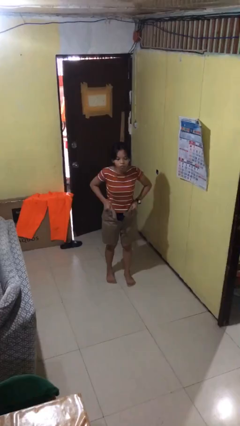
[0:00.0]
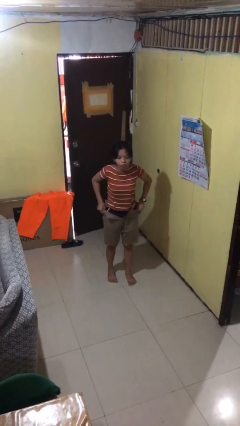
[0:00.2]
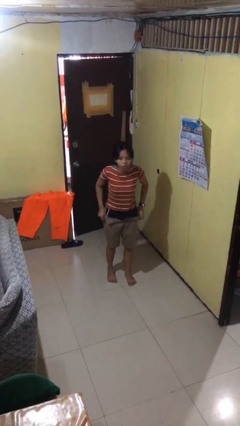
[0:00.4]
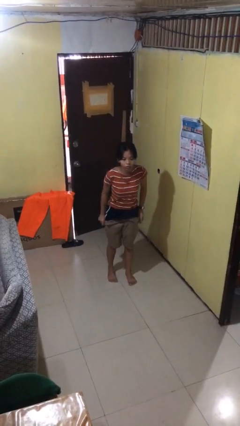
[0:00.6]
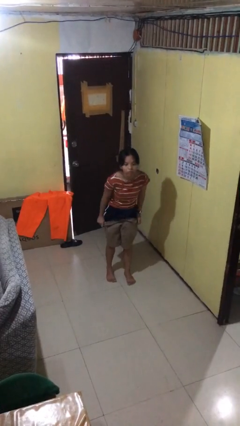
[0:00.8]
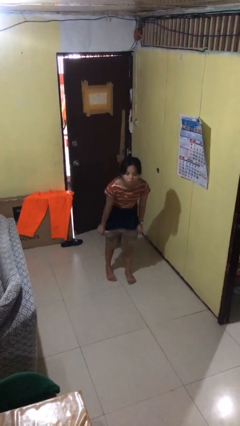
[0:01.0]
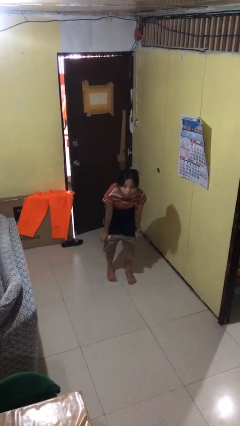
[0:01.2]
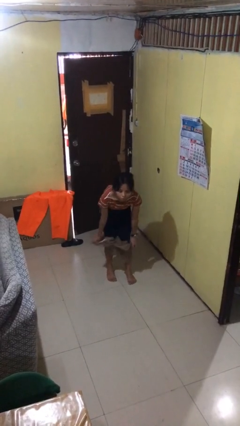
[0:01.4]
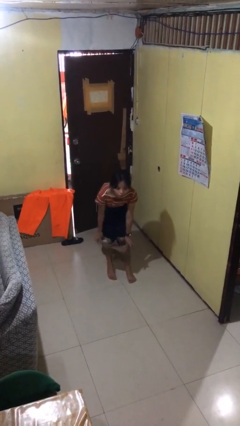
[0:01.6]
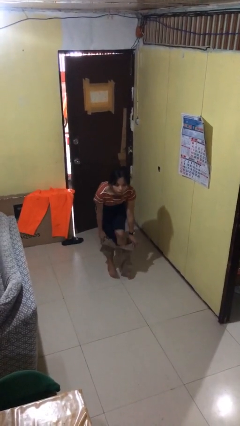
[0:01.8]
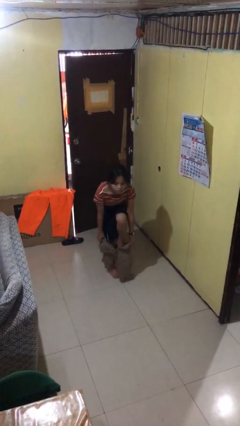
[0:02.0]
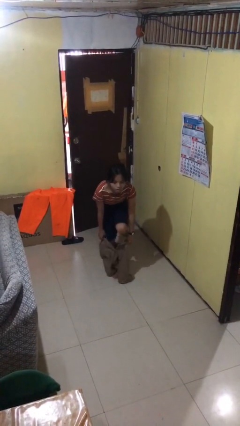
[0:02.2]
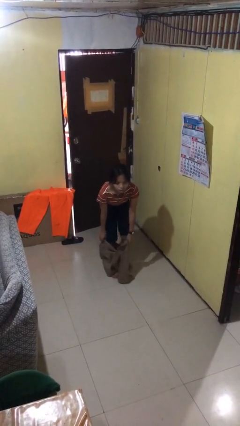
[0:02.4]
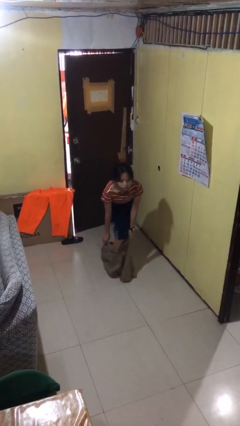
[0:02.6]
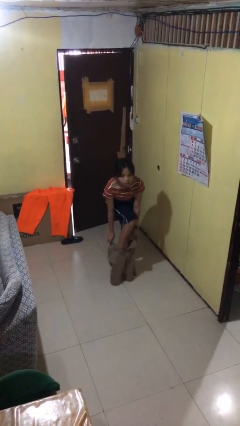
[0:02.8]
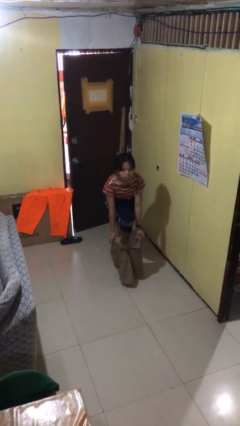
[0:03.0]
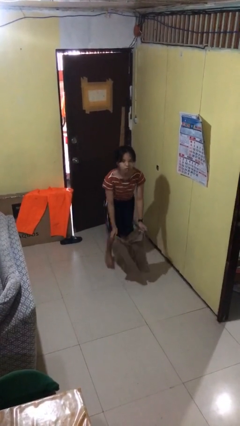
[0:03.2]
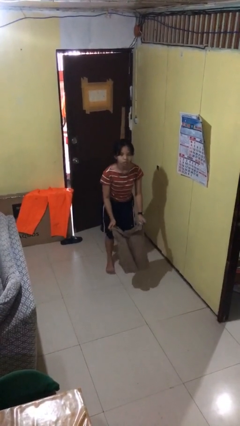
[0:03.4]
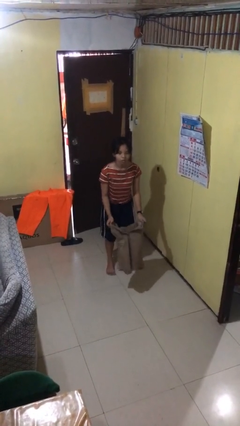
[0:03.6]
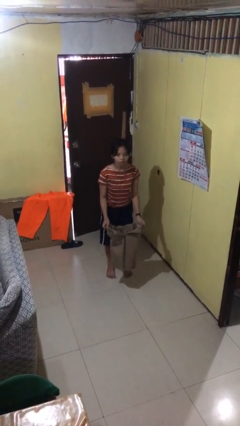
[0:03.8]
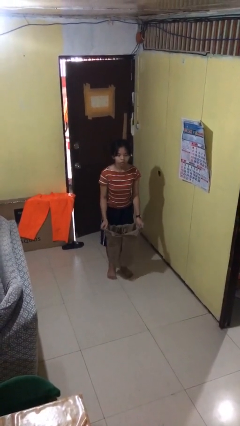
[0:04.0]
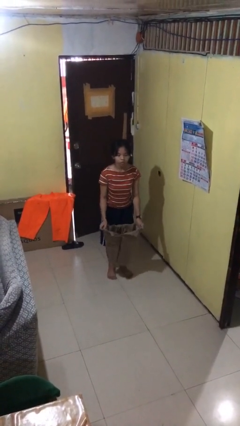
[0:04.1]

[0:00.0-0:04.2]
person takes off pants

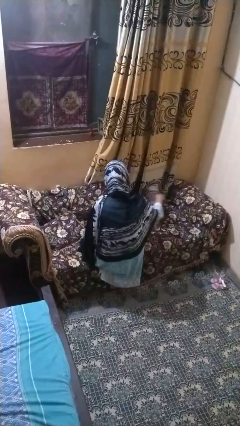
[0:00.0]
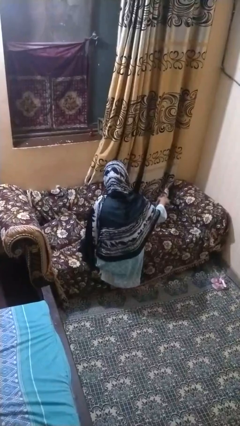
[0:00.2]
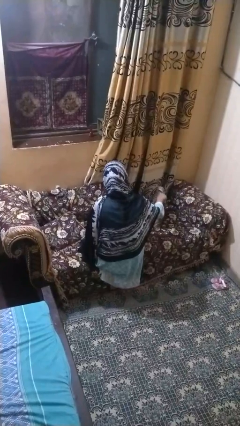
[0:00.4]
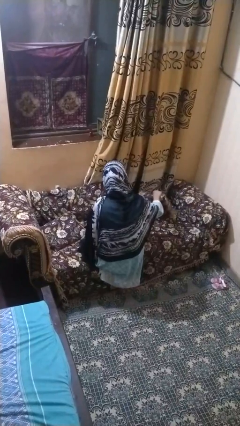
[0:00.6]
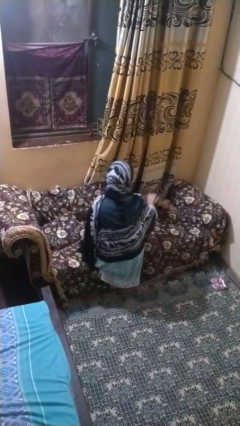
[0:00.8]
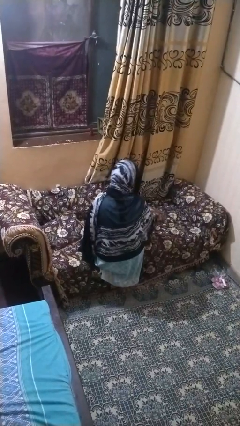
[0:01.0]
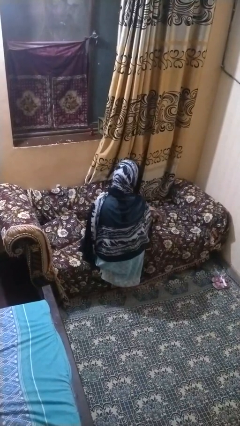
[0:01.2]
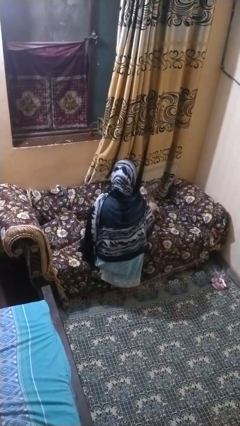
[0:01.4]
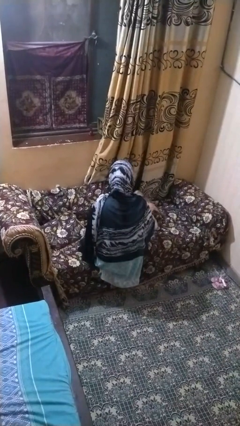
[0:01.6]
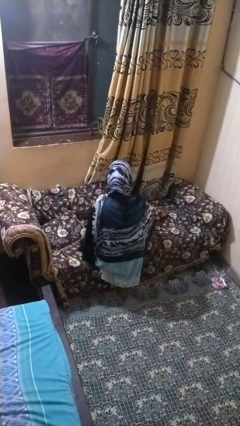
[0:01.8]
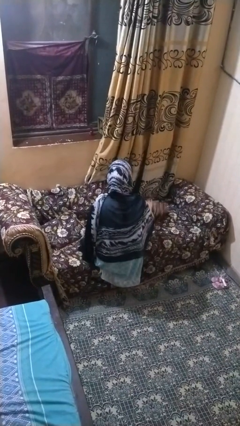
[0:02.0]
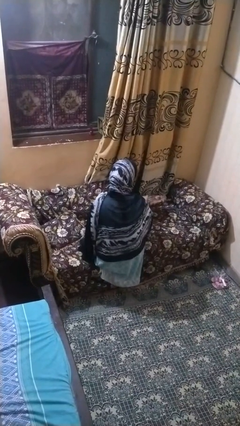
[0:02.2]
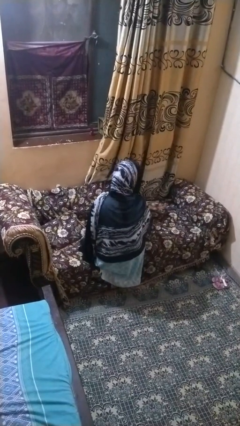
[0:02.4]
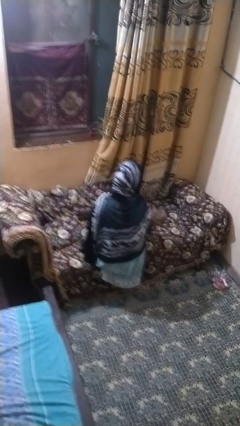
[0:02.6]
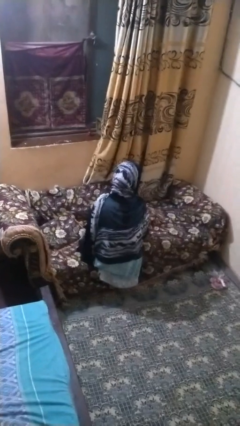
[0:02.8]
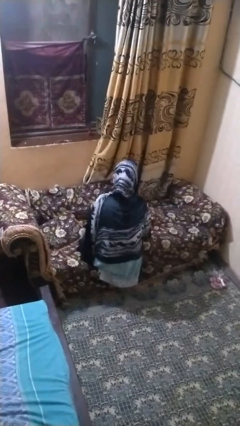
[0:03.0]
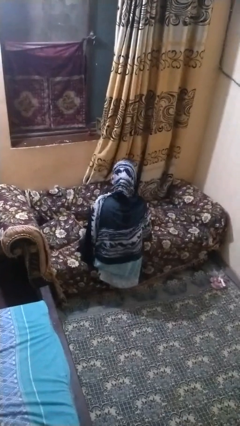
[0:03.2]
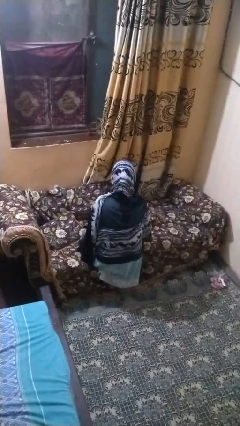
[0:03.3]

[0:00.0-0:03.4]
person searches in couch

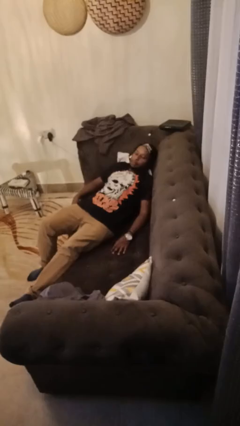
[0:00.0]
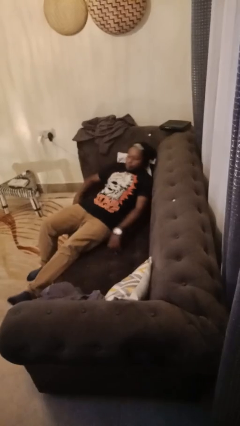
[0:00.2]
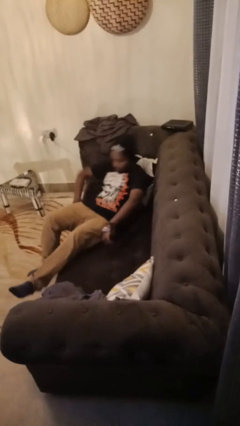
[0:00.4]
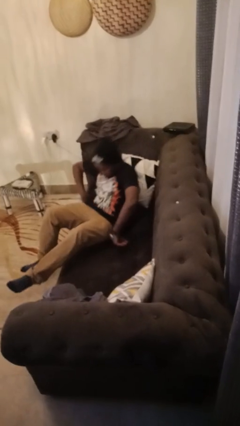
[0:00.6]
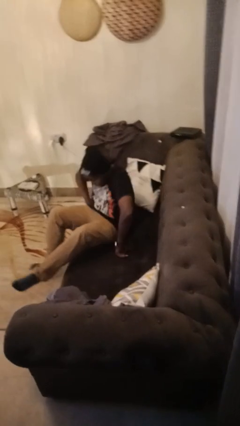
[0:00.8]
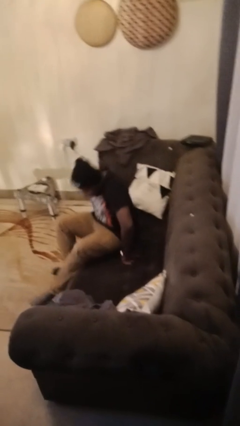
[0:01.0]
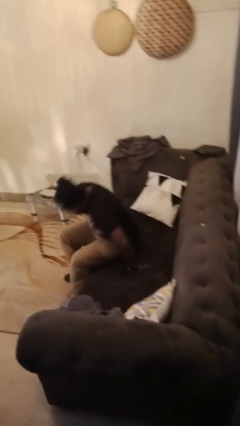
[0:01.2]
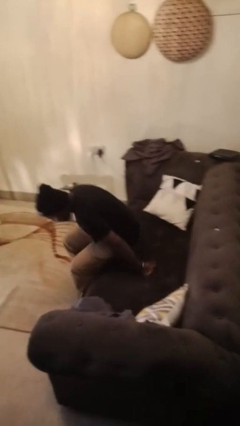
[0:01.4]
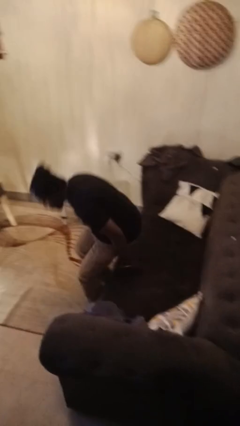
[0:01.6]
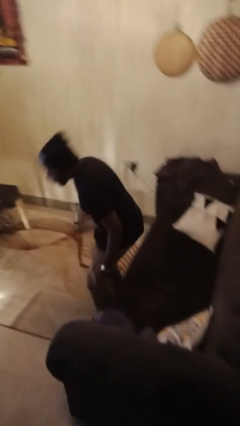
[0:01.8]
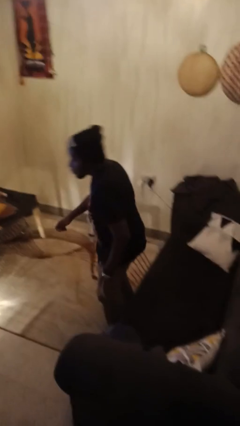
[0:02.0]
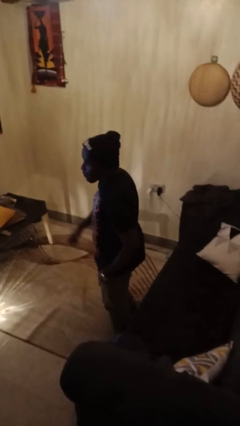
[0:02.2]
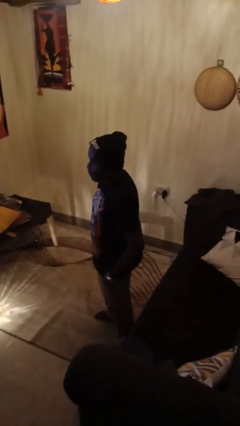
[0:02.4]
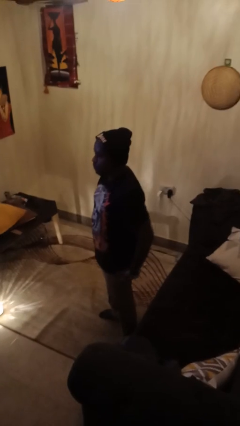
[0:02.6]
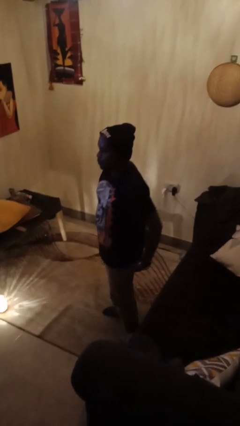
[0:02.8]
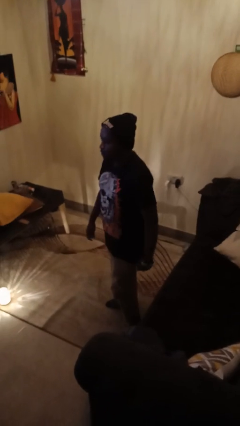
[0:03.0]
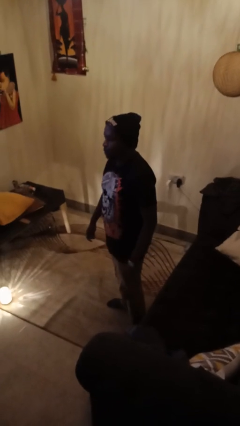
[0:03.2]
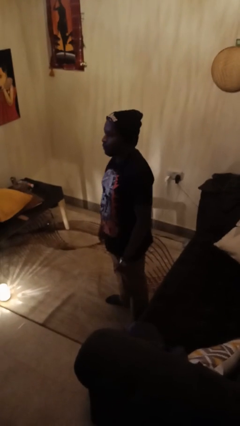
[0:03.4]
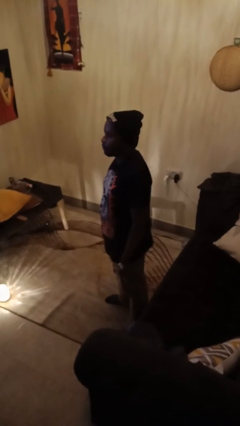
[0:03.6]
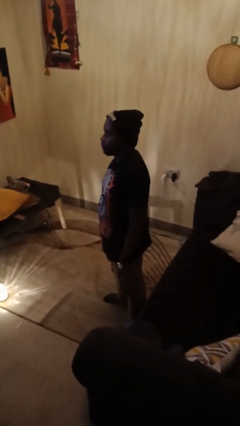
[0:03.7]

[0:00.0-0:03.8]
person stands up

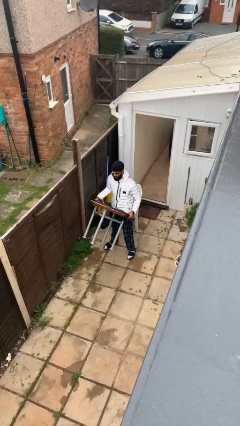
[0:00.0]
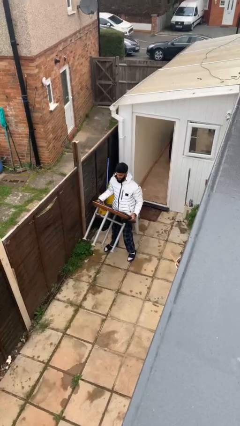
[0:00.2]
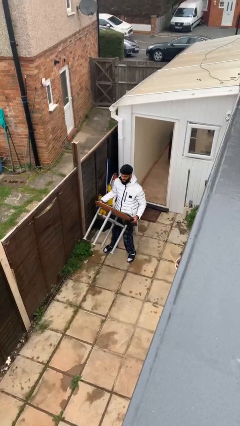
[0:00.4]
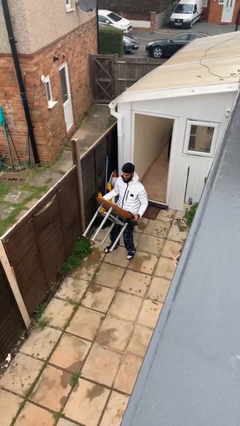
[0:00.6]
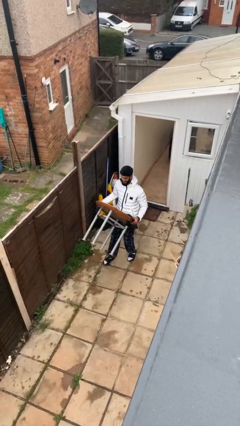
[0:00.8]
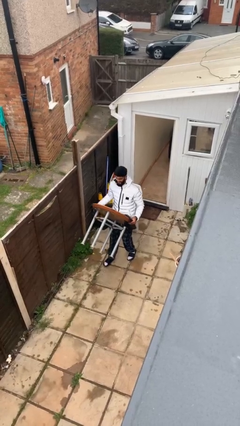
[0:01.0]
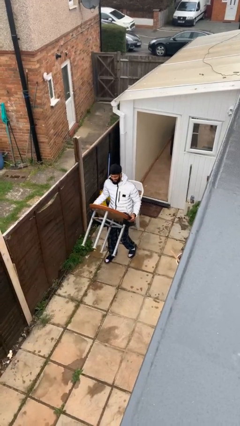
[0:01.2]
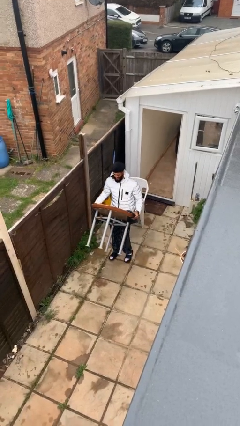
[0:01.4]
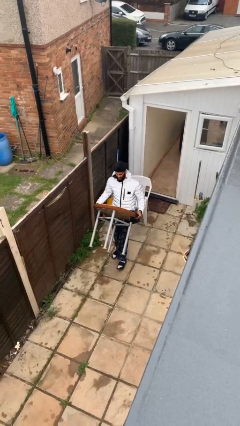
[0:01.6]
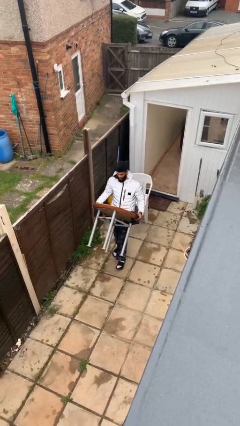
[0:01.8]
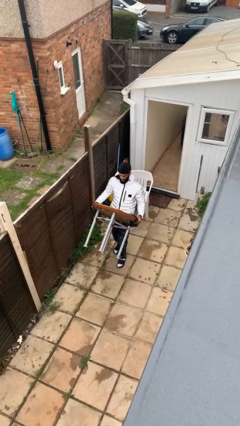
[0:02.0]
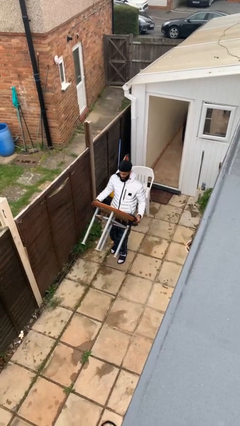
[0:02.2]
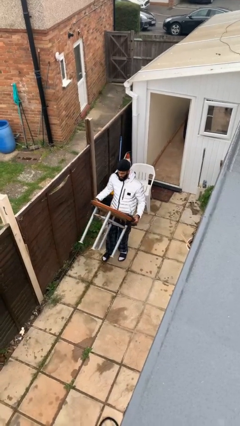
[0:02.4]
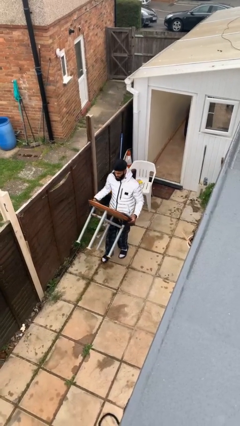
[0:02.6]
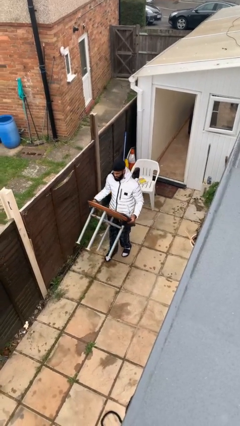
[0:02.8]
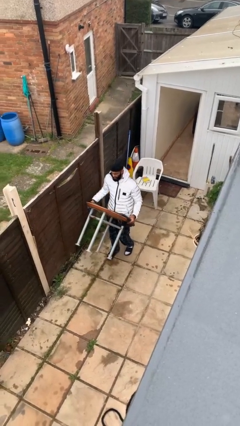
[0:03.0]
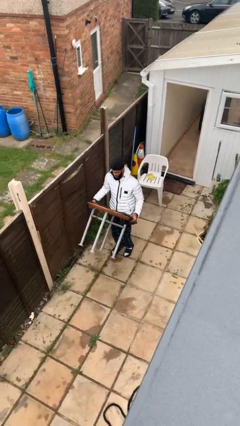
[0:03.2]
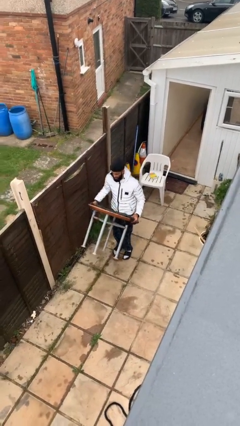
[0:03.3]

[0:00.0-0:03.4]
person carries heavy object

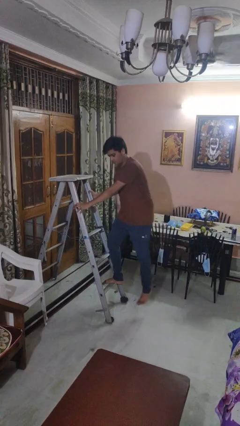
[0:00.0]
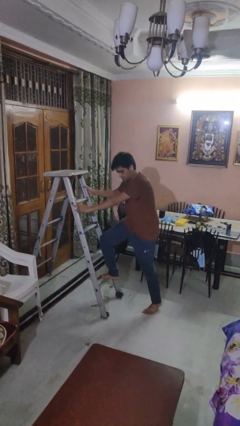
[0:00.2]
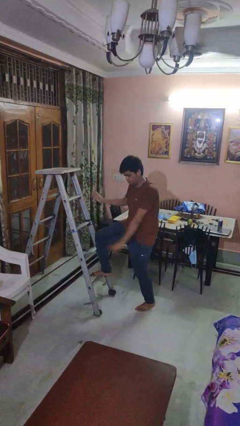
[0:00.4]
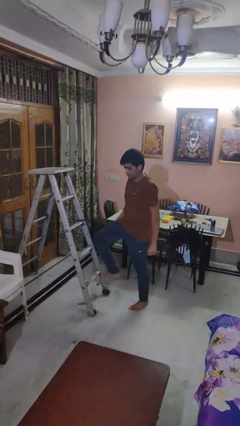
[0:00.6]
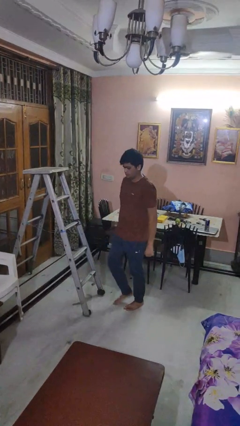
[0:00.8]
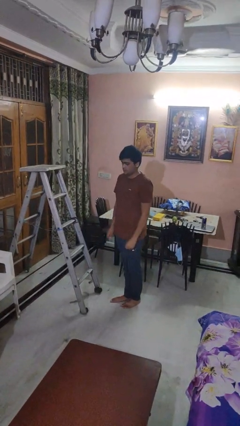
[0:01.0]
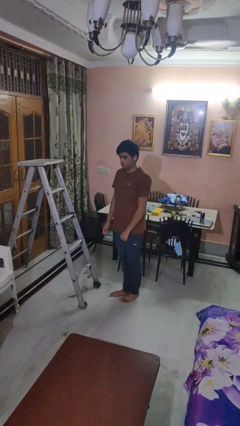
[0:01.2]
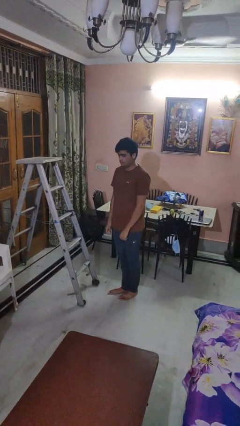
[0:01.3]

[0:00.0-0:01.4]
person climbs down ladder

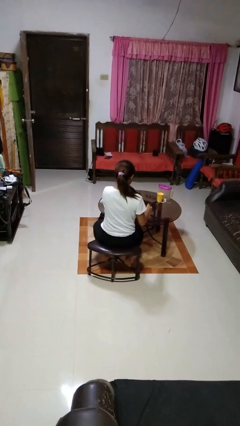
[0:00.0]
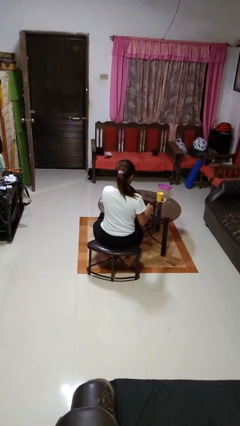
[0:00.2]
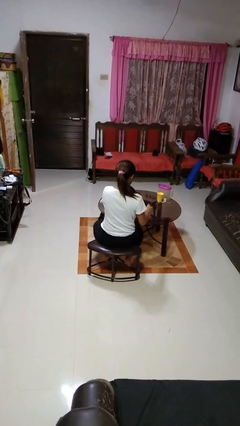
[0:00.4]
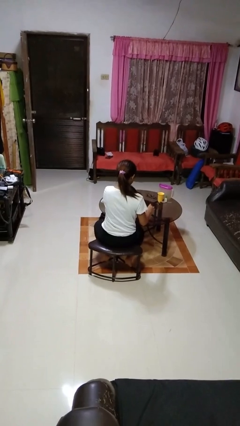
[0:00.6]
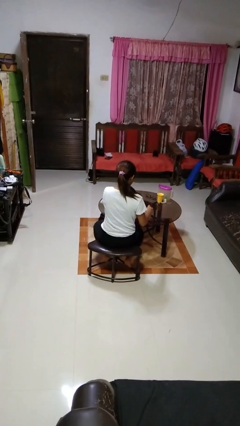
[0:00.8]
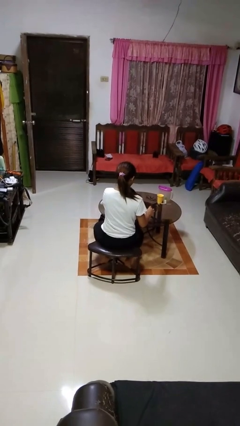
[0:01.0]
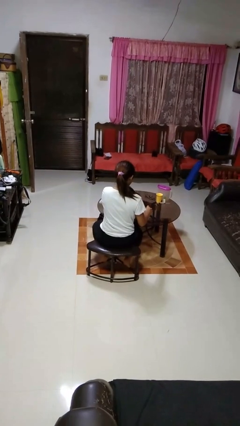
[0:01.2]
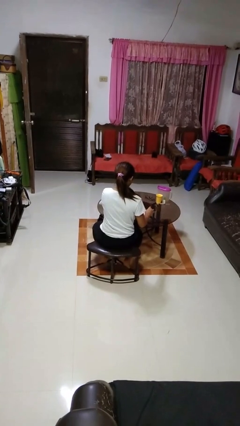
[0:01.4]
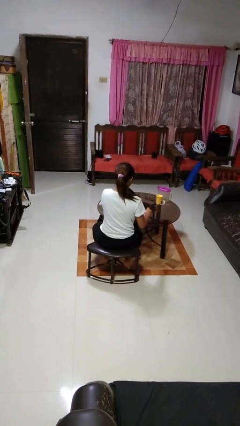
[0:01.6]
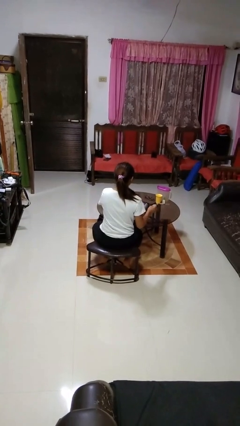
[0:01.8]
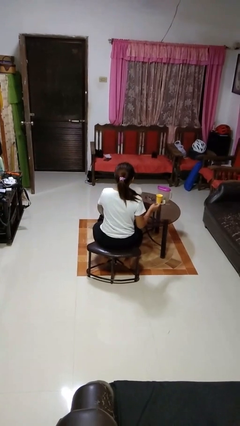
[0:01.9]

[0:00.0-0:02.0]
person stirs mug
